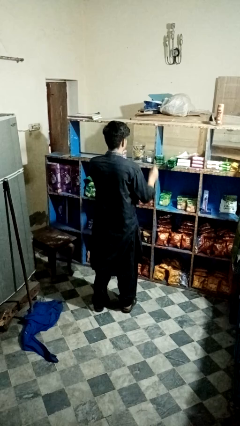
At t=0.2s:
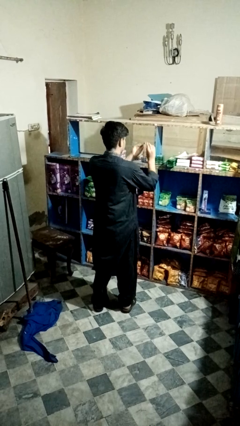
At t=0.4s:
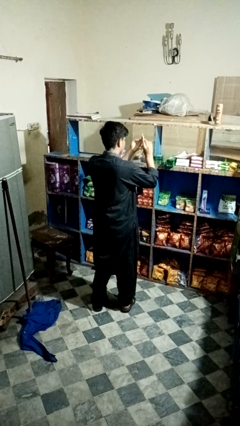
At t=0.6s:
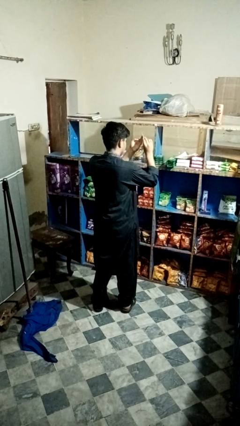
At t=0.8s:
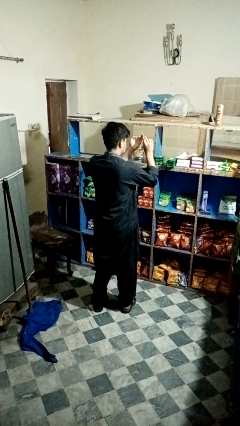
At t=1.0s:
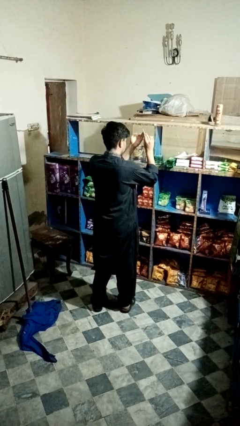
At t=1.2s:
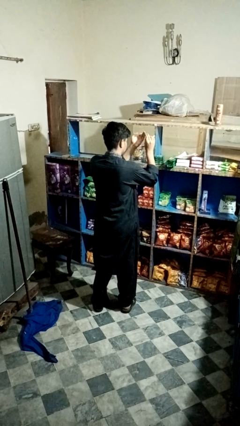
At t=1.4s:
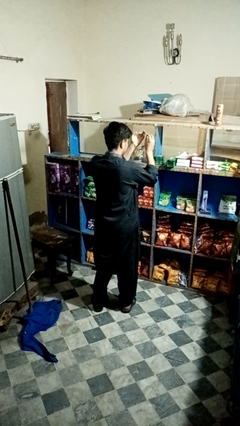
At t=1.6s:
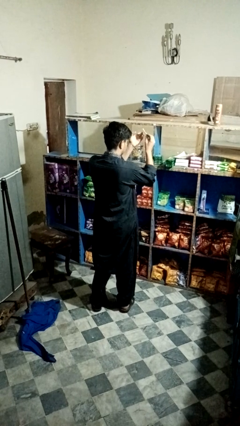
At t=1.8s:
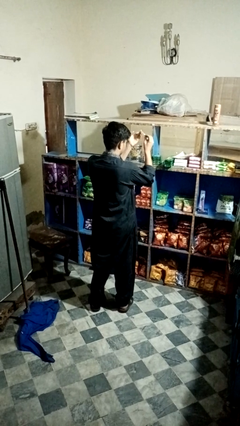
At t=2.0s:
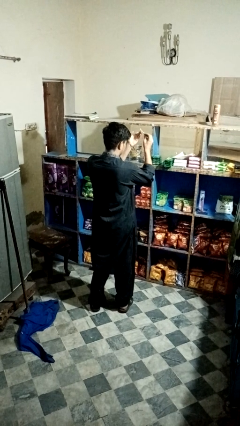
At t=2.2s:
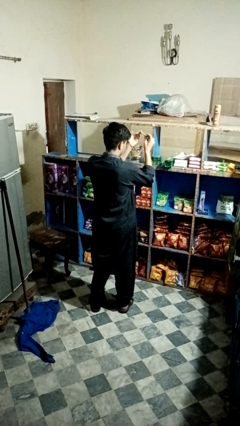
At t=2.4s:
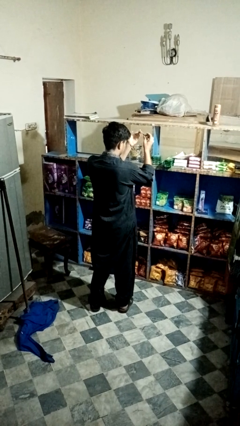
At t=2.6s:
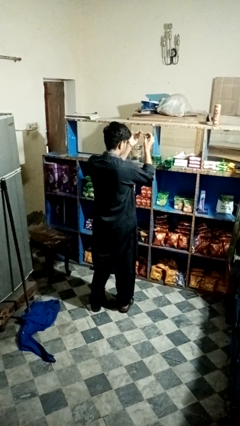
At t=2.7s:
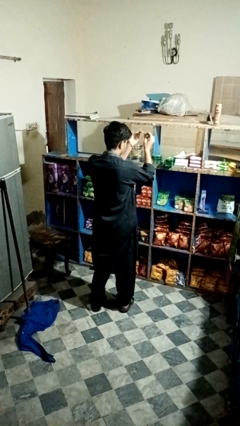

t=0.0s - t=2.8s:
person files fingernails

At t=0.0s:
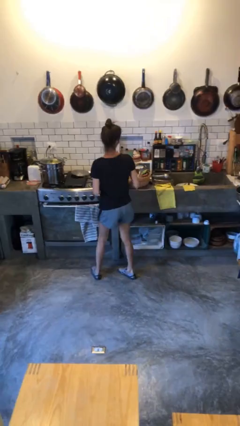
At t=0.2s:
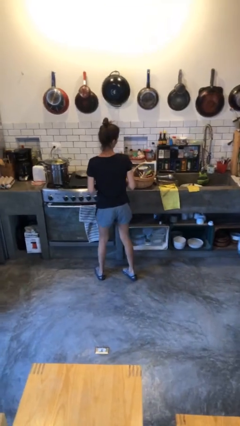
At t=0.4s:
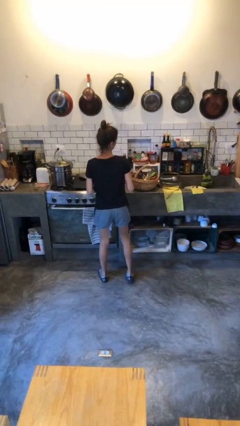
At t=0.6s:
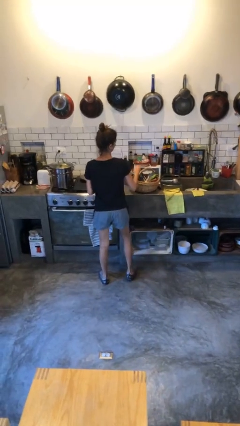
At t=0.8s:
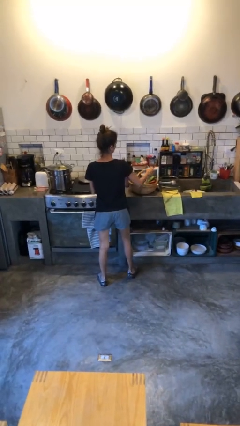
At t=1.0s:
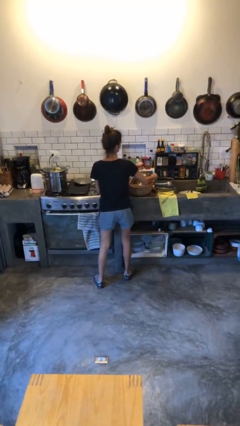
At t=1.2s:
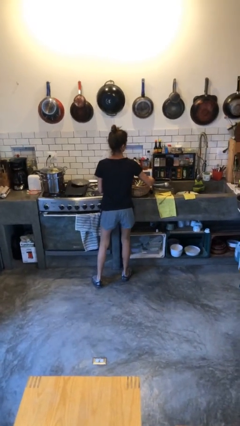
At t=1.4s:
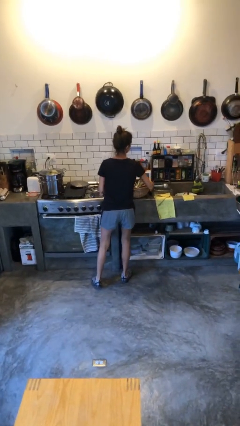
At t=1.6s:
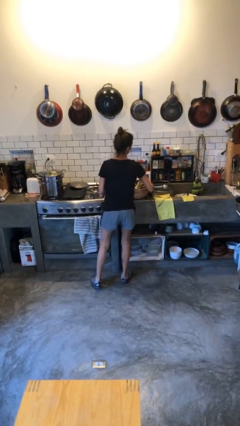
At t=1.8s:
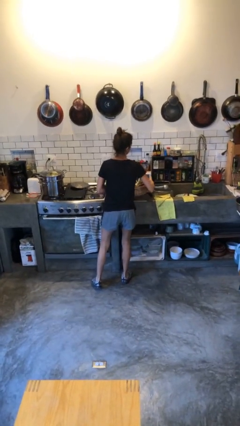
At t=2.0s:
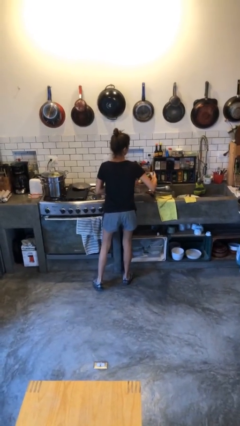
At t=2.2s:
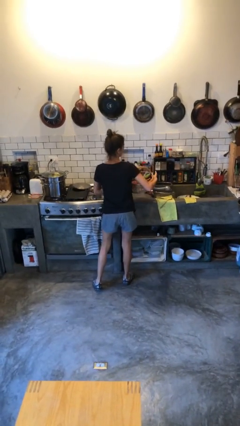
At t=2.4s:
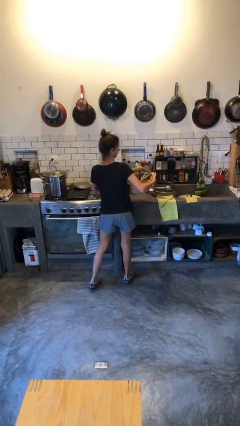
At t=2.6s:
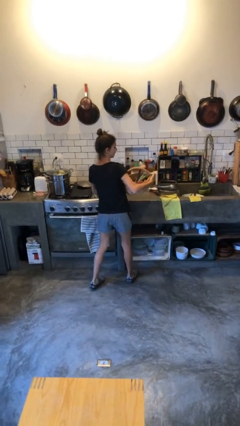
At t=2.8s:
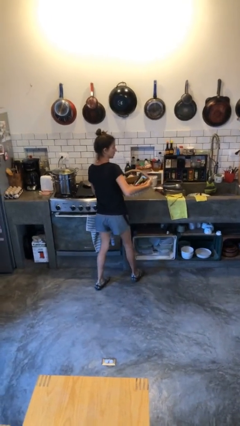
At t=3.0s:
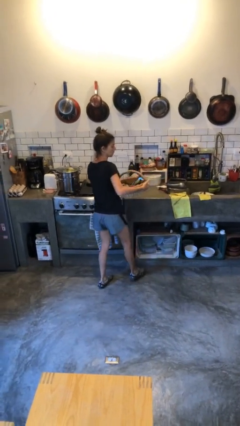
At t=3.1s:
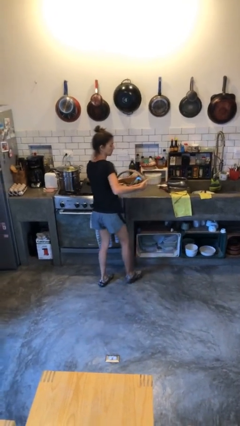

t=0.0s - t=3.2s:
person picks up object from countertop

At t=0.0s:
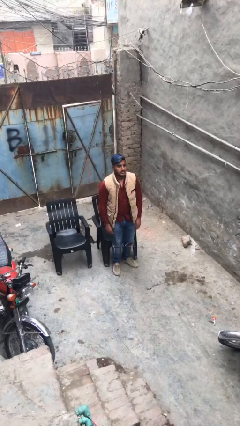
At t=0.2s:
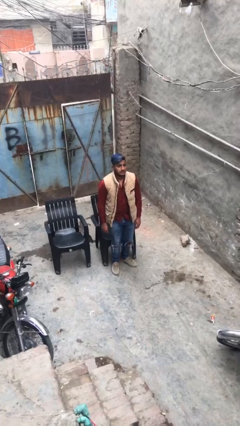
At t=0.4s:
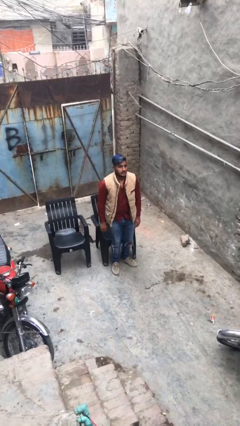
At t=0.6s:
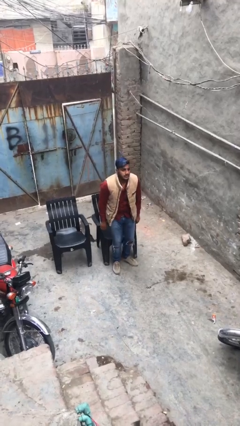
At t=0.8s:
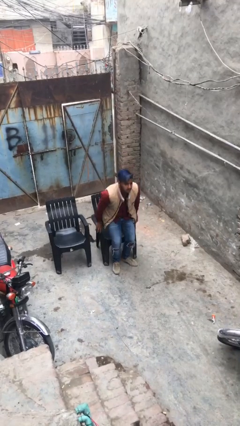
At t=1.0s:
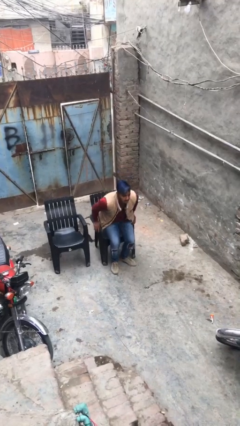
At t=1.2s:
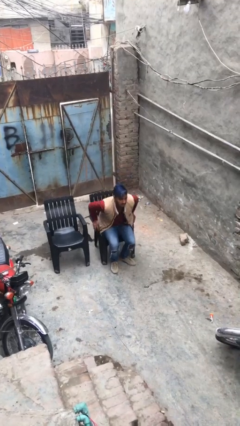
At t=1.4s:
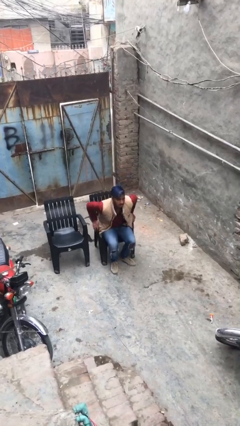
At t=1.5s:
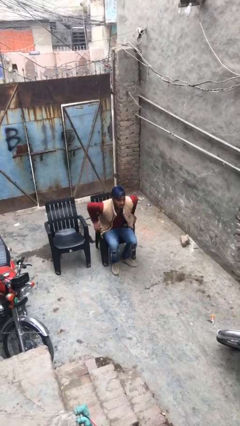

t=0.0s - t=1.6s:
person sits down

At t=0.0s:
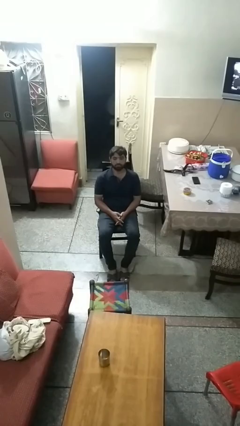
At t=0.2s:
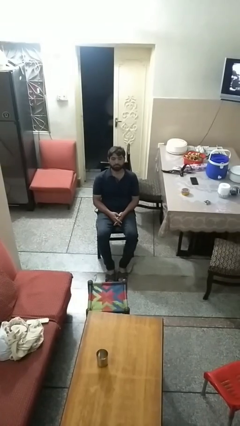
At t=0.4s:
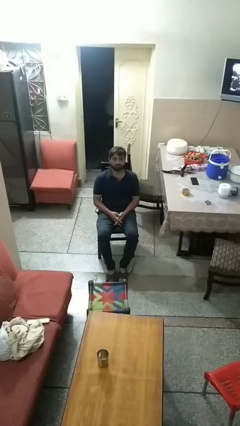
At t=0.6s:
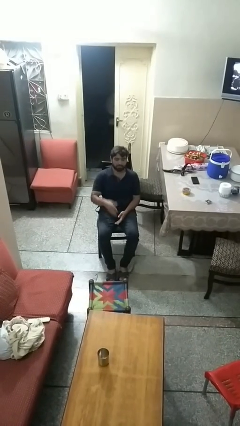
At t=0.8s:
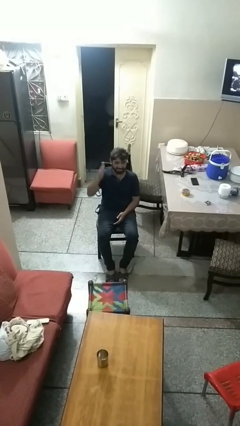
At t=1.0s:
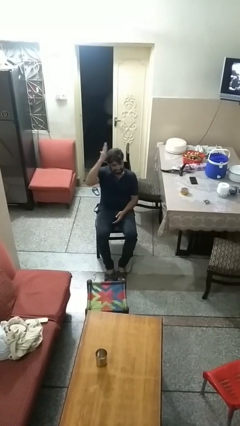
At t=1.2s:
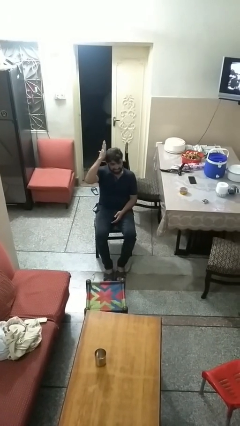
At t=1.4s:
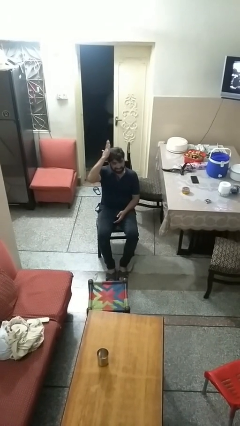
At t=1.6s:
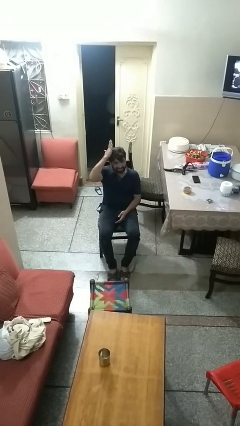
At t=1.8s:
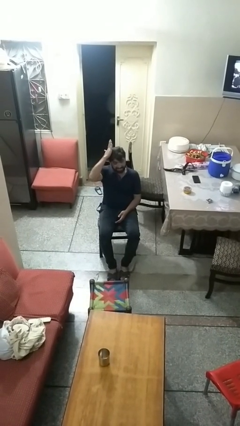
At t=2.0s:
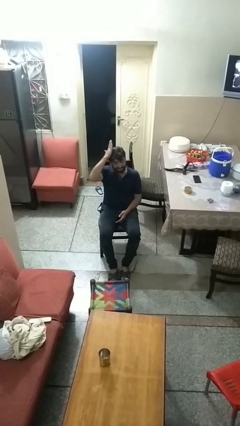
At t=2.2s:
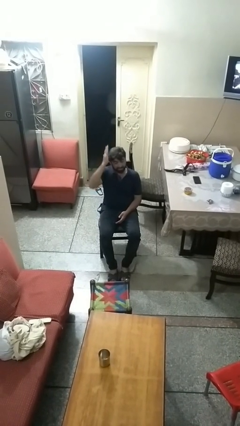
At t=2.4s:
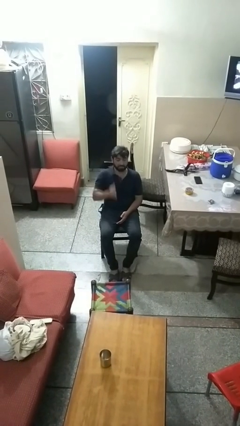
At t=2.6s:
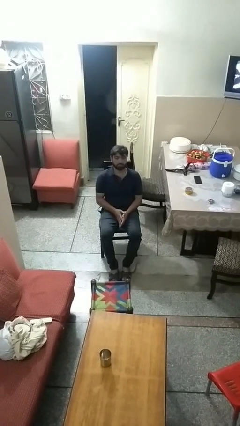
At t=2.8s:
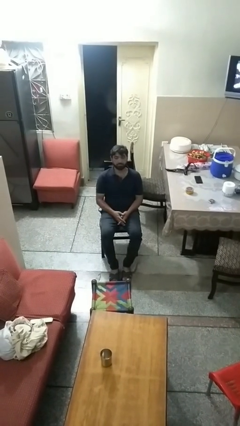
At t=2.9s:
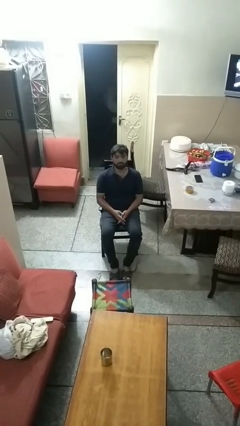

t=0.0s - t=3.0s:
person pats head

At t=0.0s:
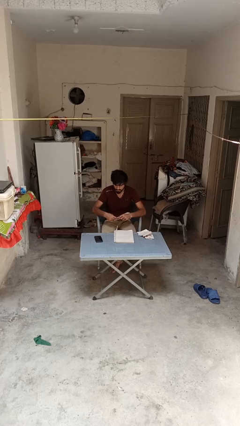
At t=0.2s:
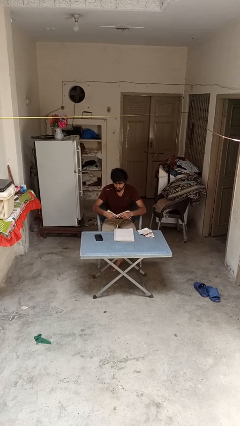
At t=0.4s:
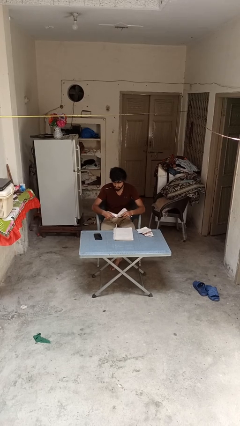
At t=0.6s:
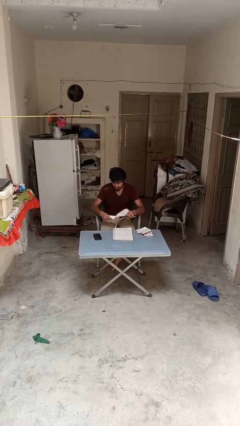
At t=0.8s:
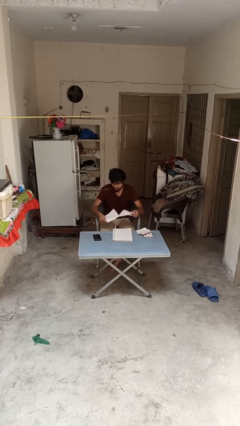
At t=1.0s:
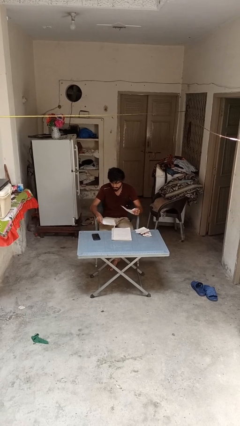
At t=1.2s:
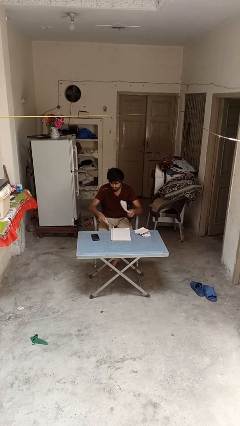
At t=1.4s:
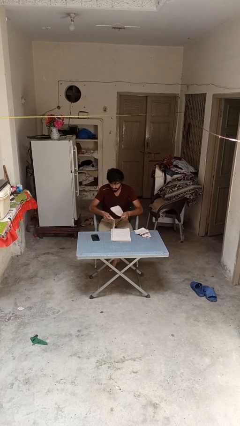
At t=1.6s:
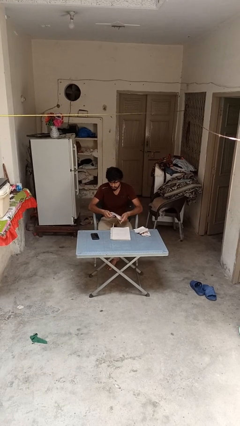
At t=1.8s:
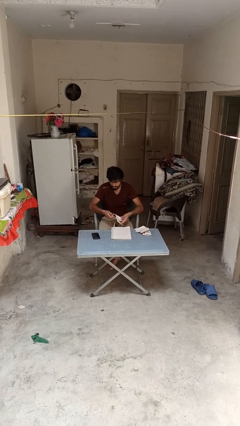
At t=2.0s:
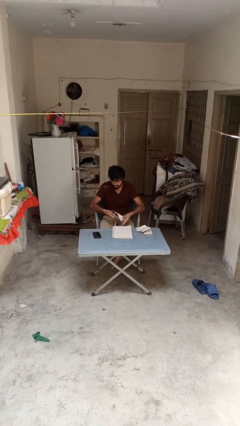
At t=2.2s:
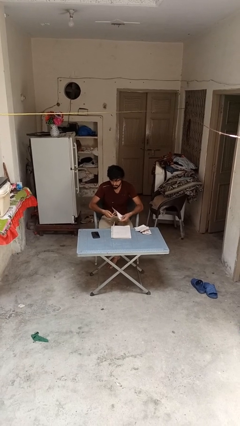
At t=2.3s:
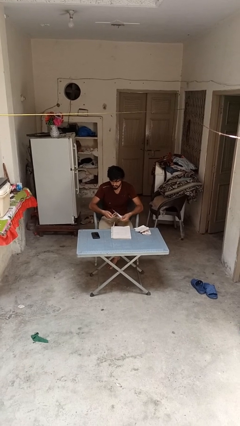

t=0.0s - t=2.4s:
person tears paper

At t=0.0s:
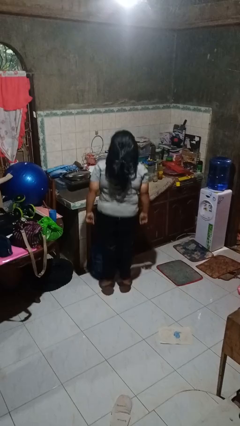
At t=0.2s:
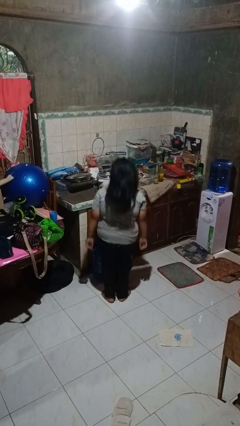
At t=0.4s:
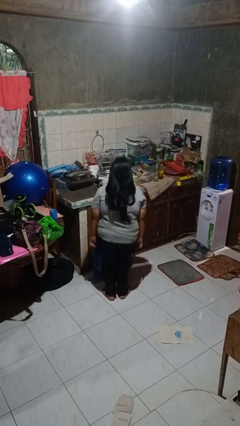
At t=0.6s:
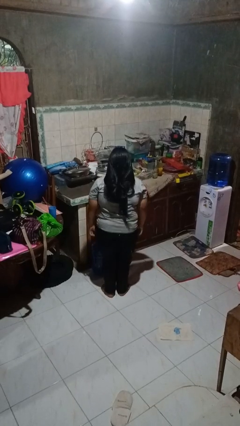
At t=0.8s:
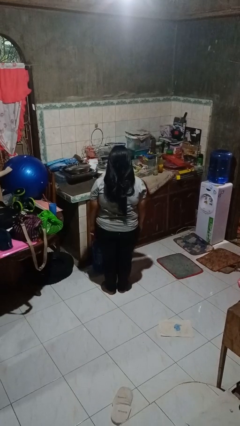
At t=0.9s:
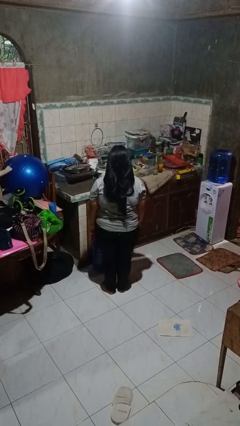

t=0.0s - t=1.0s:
person jumps

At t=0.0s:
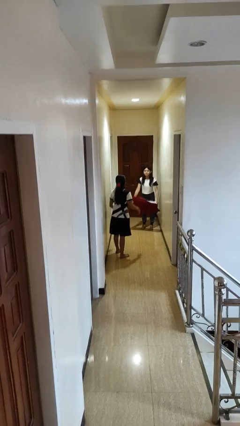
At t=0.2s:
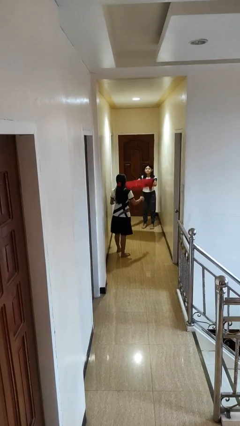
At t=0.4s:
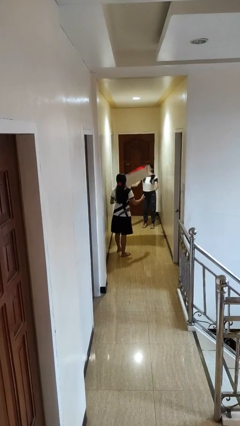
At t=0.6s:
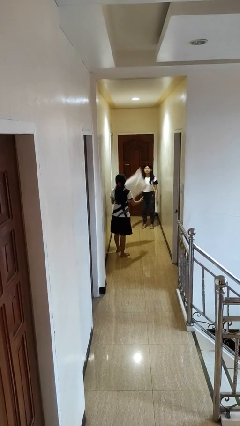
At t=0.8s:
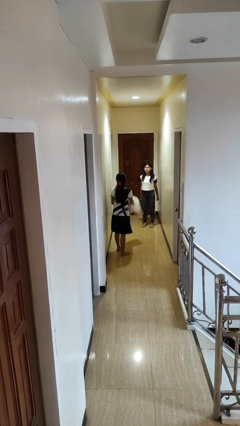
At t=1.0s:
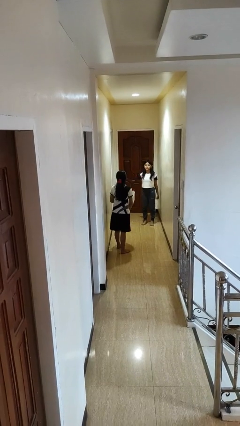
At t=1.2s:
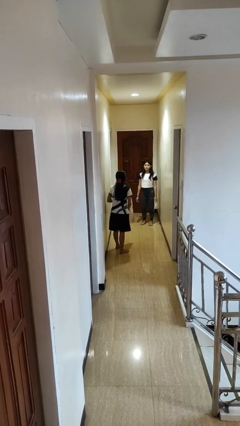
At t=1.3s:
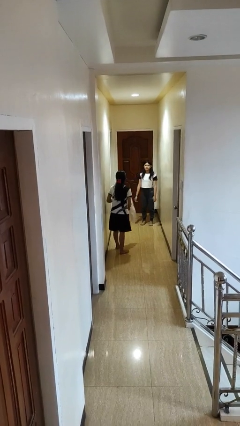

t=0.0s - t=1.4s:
person catches object from person

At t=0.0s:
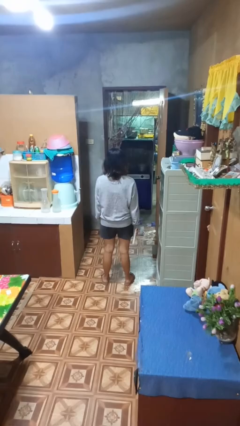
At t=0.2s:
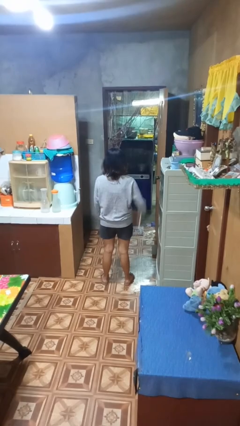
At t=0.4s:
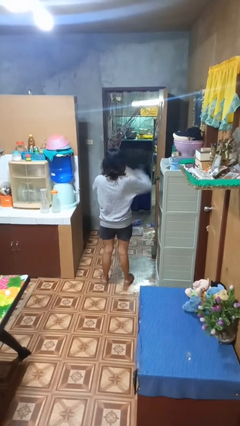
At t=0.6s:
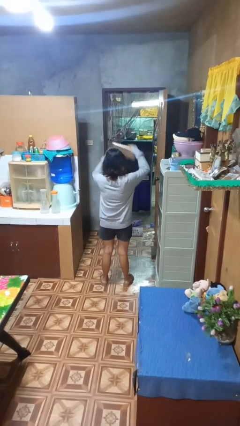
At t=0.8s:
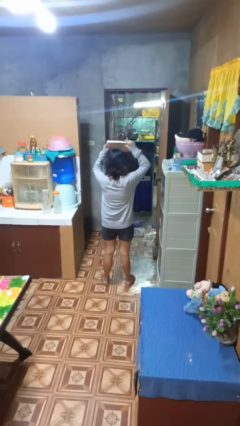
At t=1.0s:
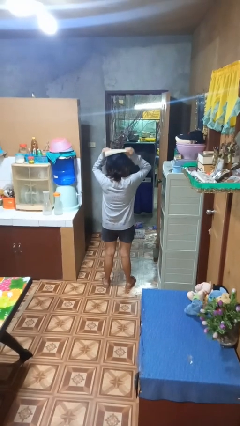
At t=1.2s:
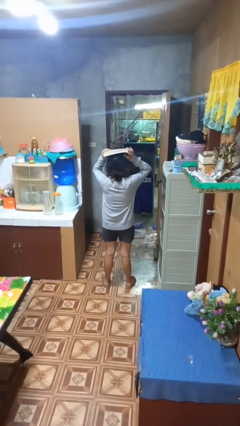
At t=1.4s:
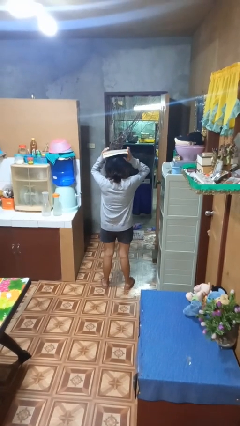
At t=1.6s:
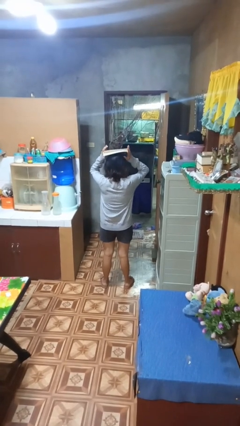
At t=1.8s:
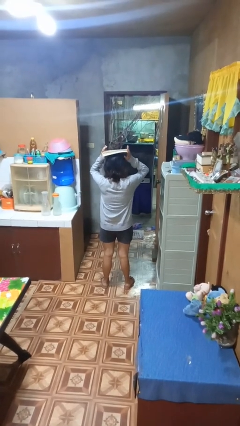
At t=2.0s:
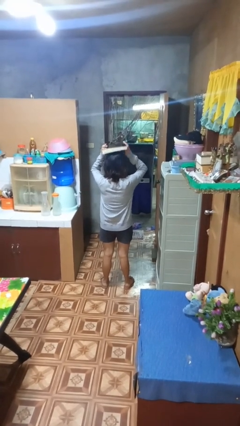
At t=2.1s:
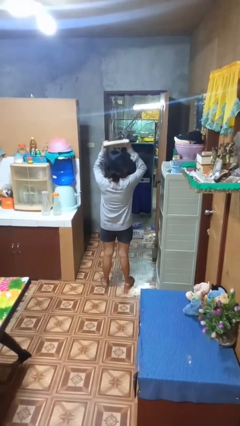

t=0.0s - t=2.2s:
person holds object above head
